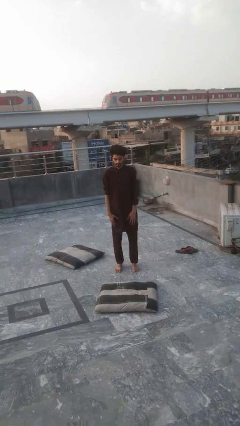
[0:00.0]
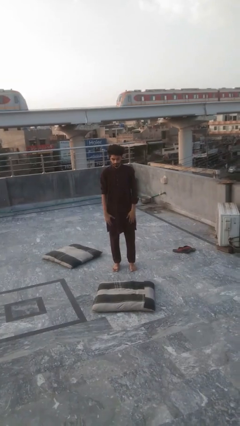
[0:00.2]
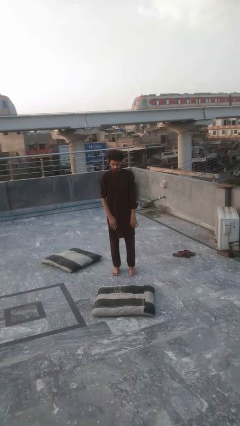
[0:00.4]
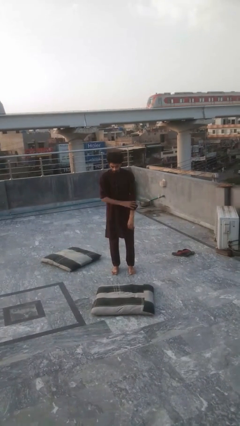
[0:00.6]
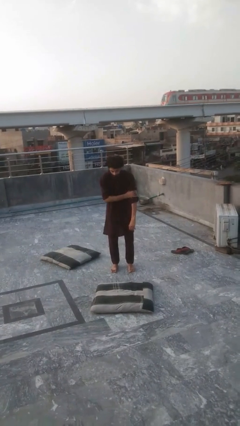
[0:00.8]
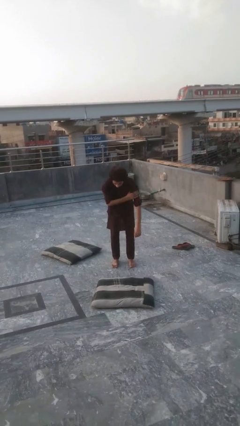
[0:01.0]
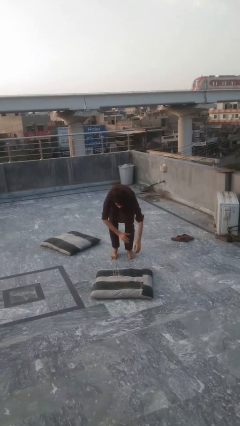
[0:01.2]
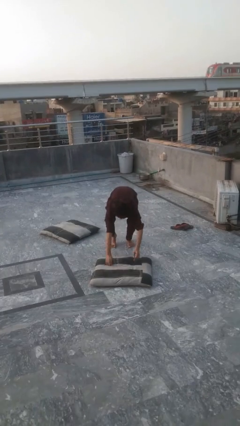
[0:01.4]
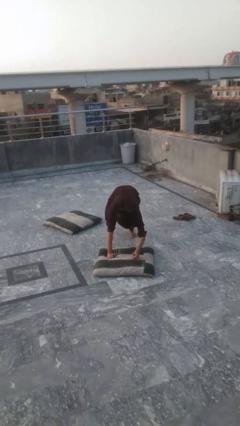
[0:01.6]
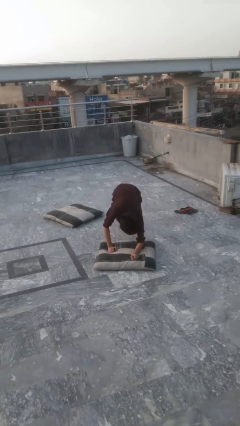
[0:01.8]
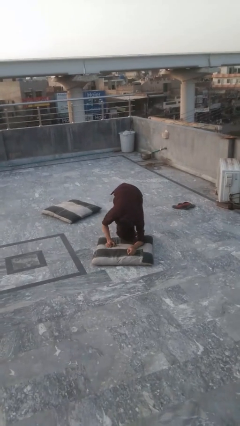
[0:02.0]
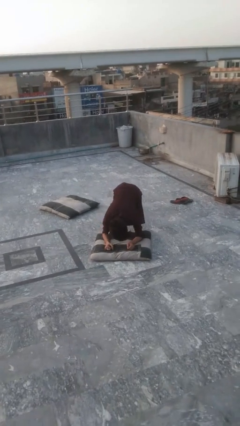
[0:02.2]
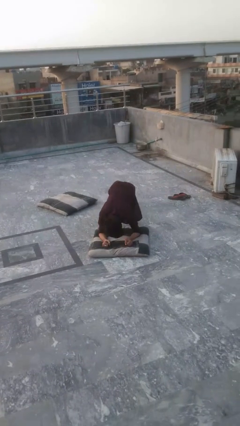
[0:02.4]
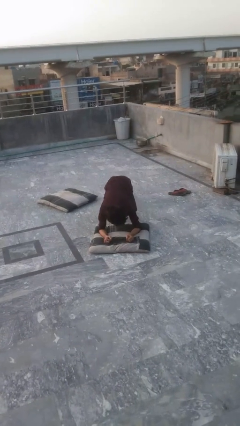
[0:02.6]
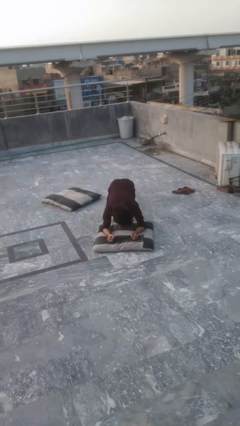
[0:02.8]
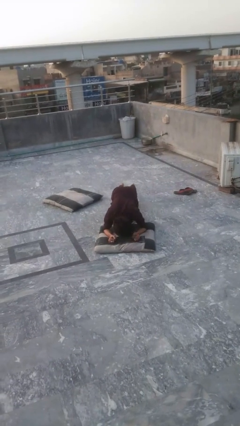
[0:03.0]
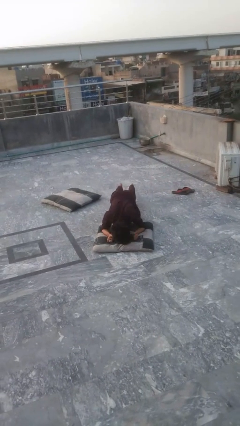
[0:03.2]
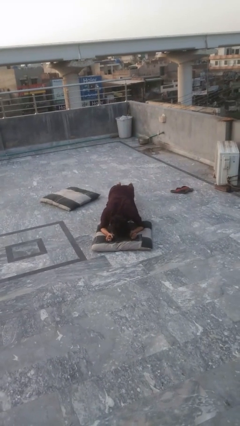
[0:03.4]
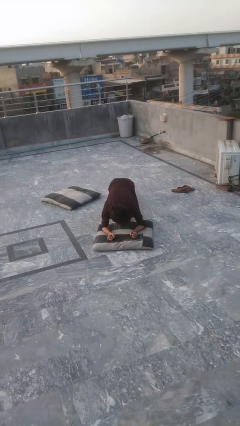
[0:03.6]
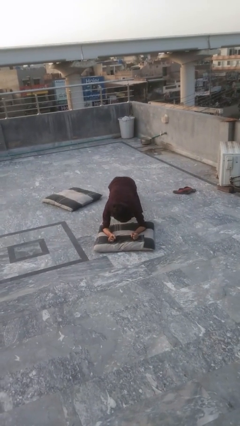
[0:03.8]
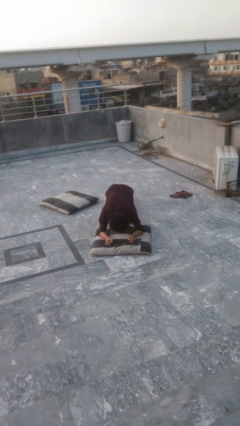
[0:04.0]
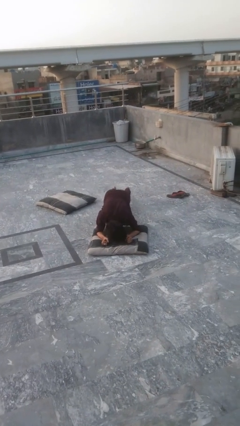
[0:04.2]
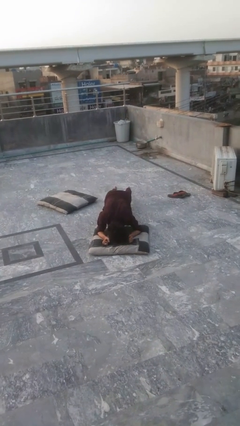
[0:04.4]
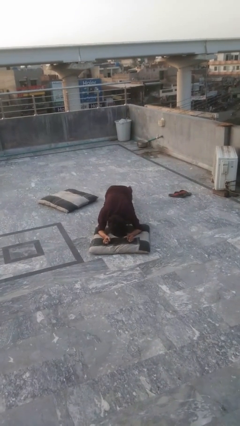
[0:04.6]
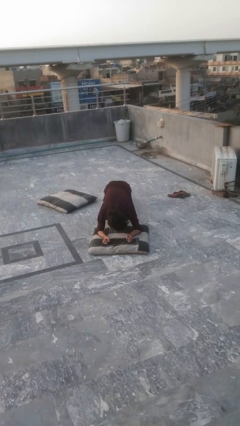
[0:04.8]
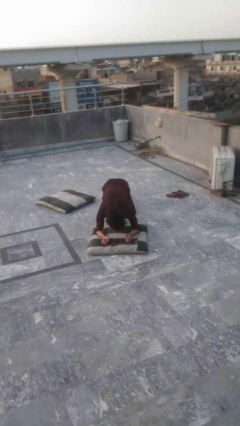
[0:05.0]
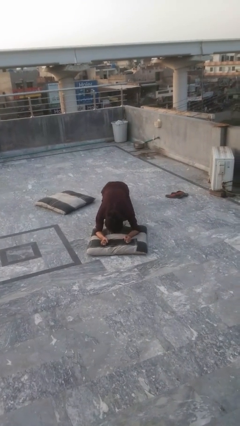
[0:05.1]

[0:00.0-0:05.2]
person exercises with plank

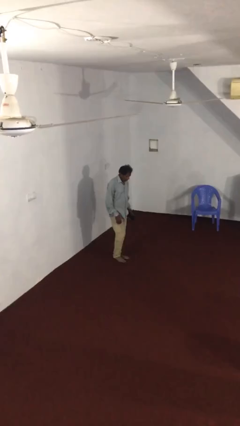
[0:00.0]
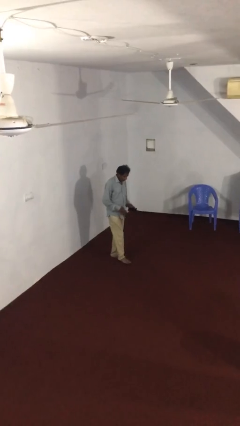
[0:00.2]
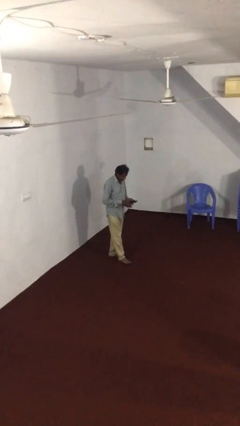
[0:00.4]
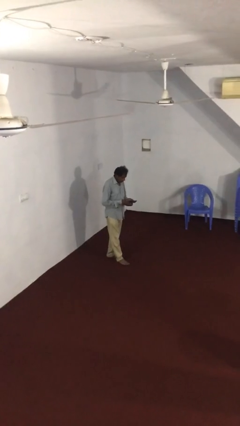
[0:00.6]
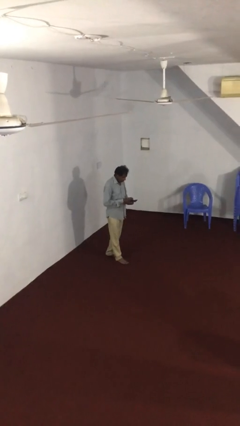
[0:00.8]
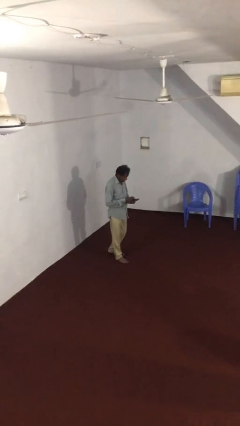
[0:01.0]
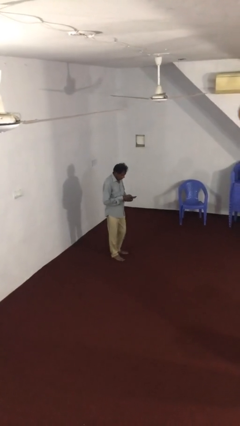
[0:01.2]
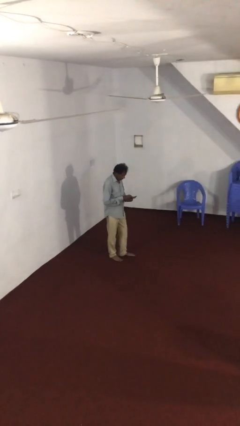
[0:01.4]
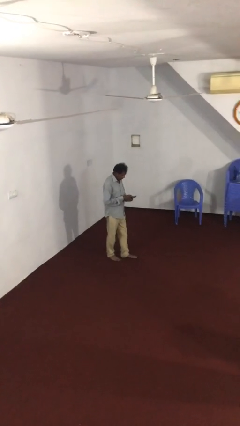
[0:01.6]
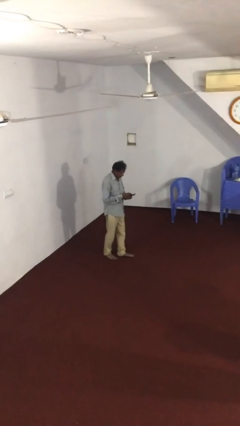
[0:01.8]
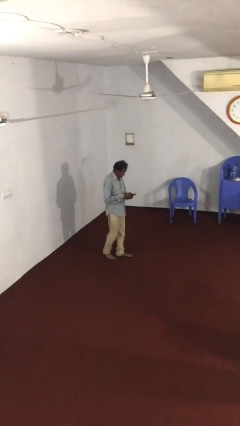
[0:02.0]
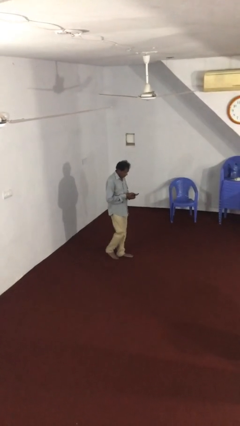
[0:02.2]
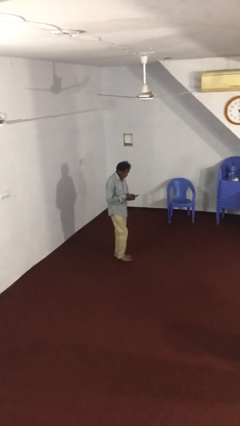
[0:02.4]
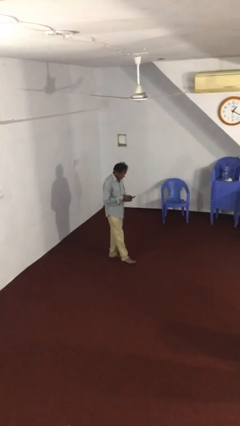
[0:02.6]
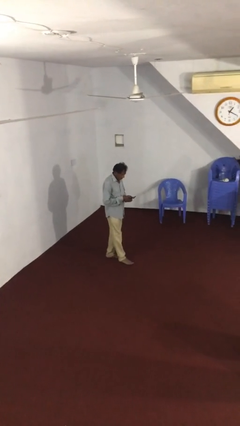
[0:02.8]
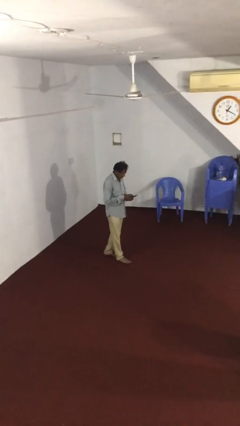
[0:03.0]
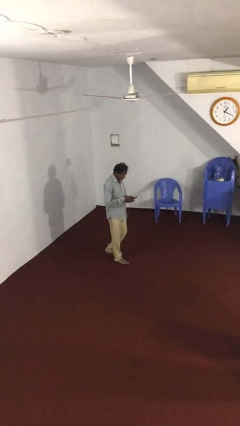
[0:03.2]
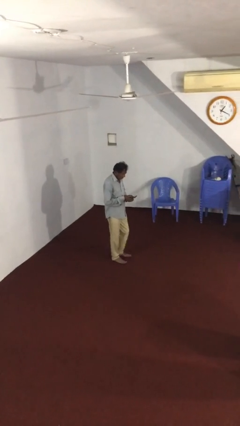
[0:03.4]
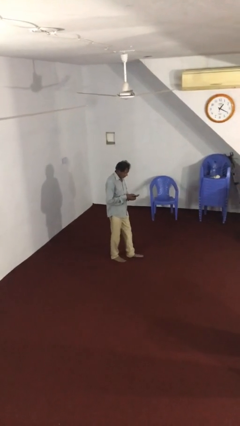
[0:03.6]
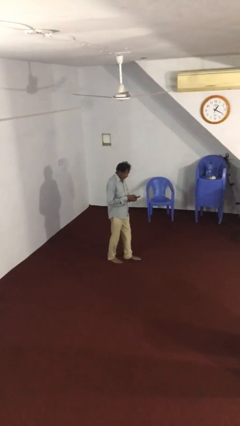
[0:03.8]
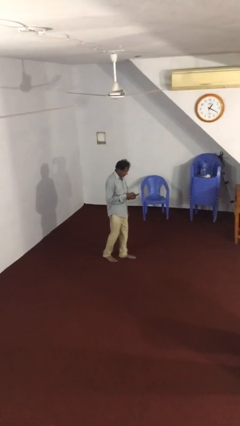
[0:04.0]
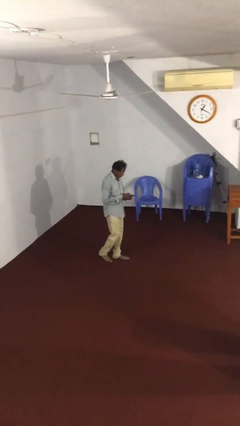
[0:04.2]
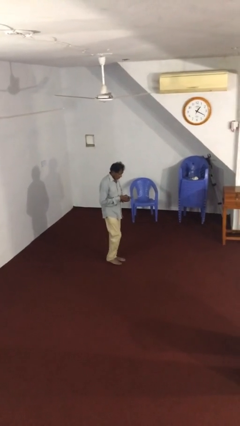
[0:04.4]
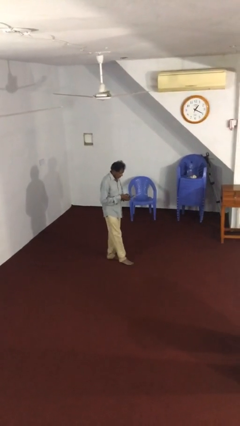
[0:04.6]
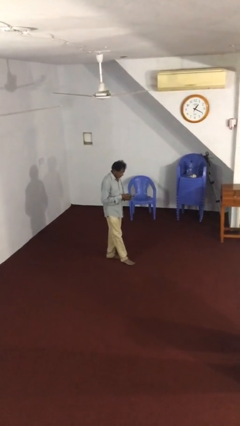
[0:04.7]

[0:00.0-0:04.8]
person texts on phone

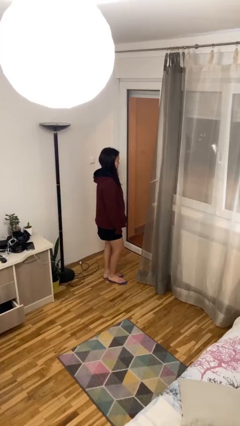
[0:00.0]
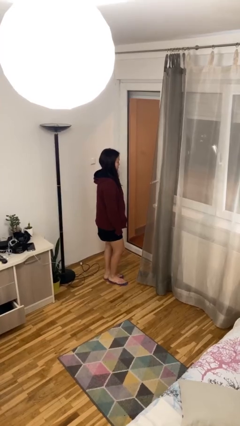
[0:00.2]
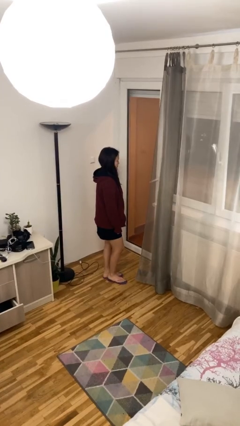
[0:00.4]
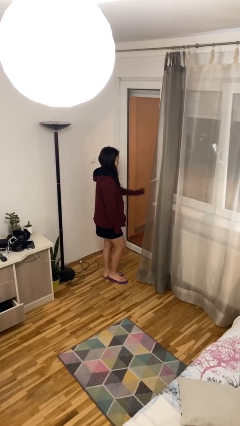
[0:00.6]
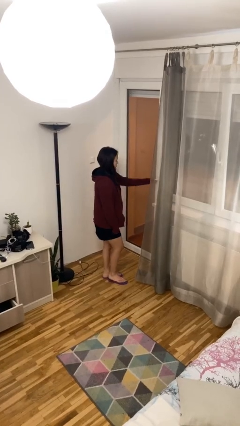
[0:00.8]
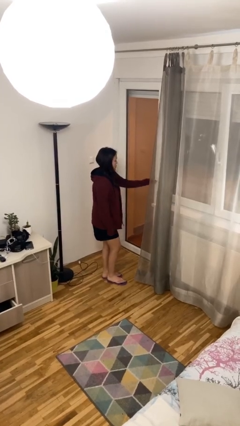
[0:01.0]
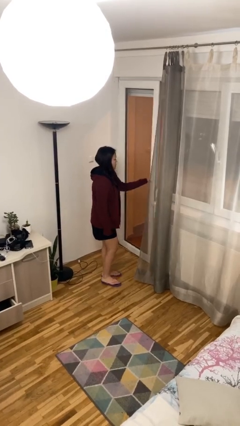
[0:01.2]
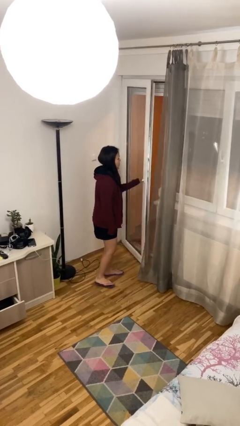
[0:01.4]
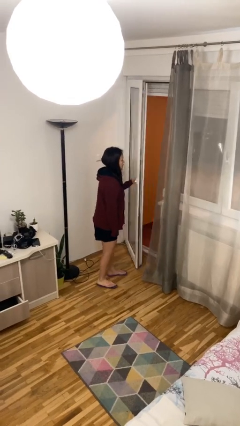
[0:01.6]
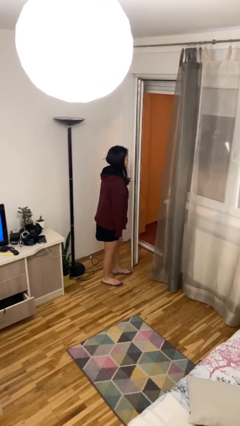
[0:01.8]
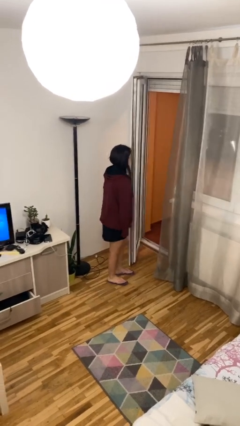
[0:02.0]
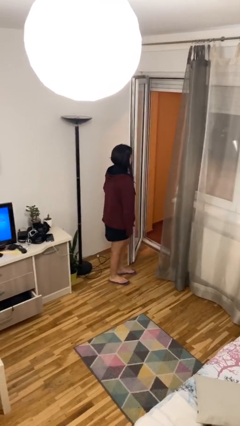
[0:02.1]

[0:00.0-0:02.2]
person opens facility door

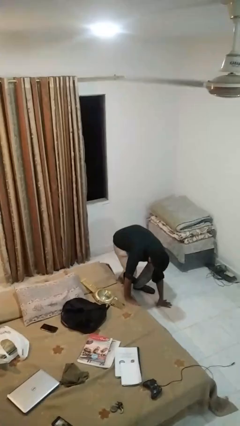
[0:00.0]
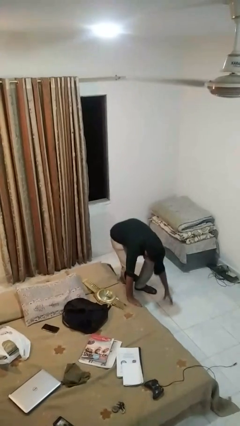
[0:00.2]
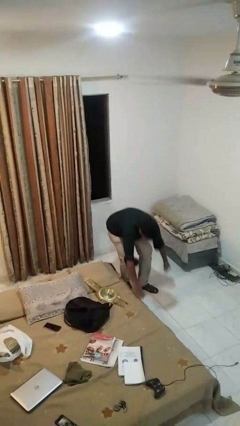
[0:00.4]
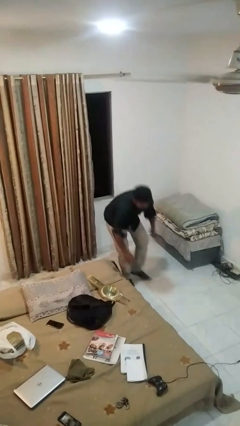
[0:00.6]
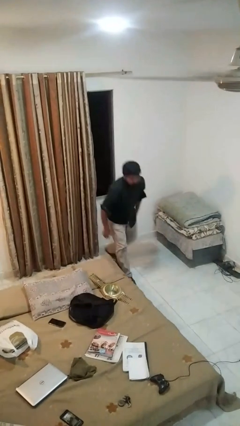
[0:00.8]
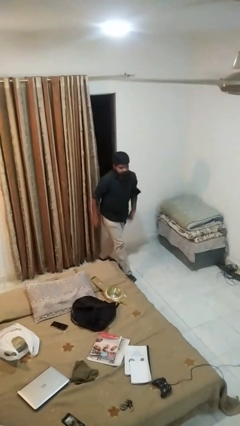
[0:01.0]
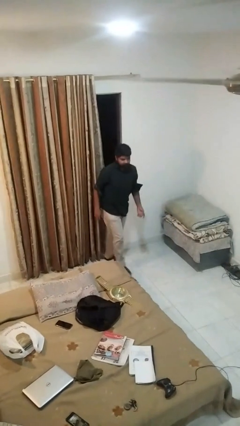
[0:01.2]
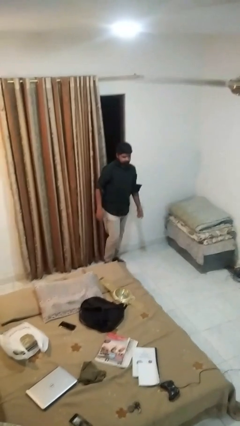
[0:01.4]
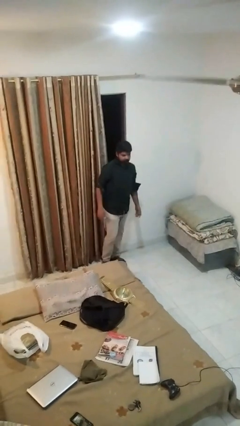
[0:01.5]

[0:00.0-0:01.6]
person stands up from floor

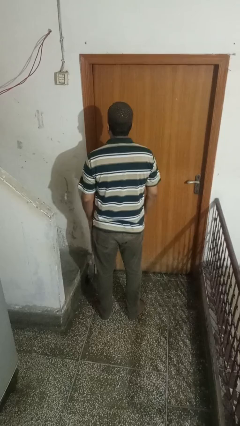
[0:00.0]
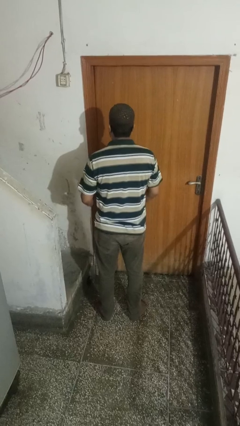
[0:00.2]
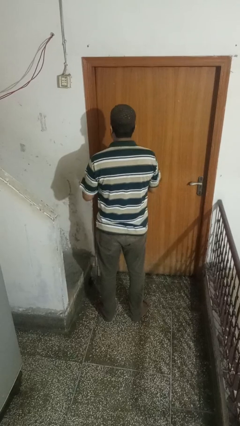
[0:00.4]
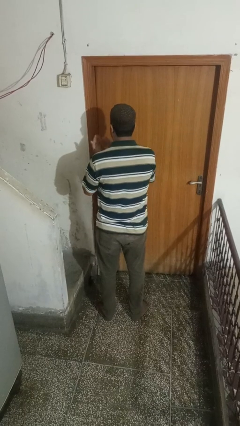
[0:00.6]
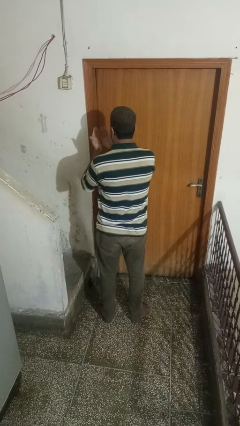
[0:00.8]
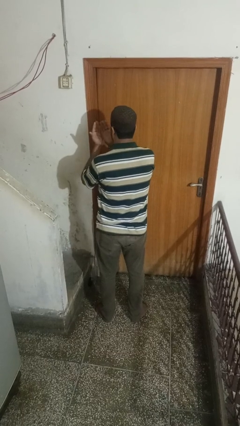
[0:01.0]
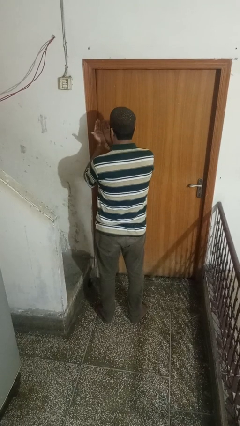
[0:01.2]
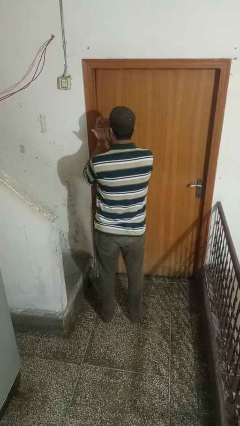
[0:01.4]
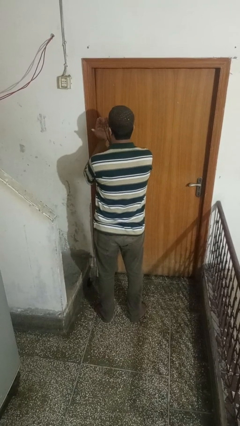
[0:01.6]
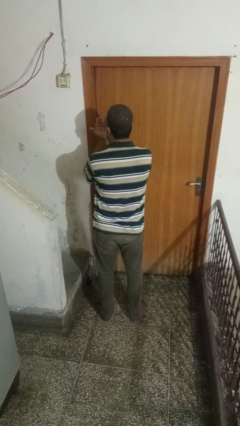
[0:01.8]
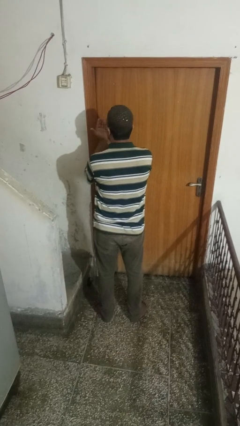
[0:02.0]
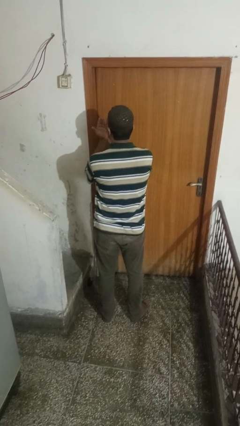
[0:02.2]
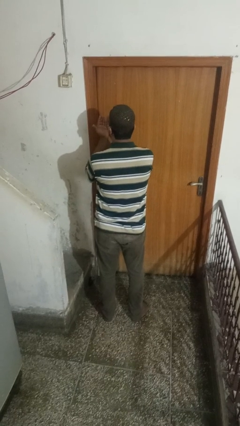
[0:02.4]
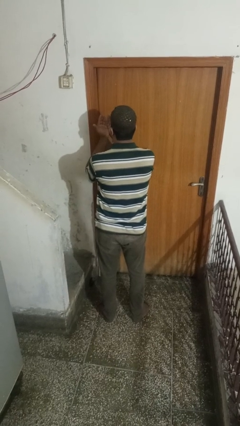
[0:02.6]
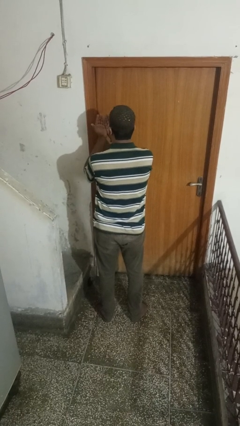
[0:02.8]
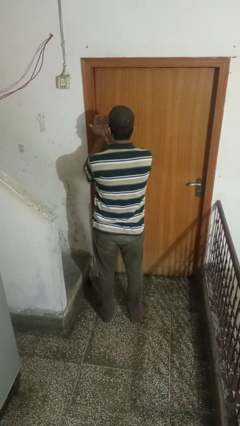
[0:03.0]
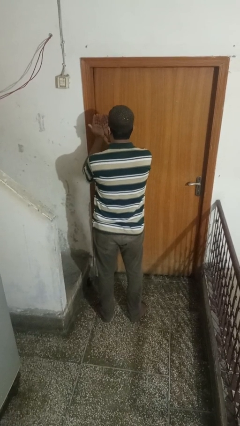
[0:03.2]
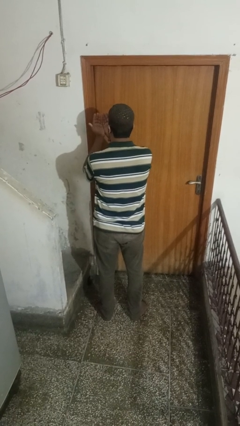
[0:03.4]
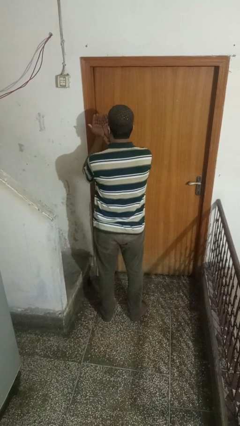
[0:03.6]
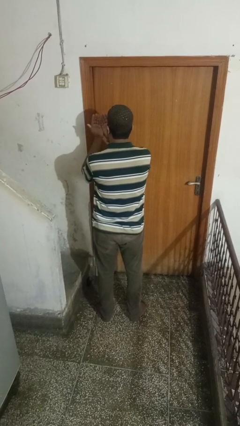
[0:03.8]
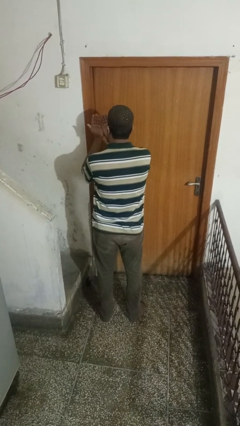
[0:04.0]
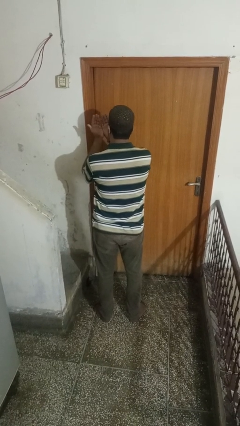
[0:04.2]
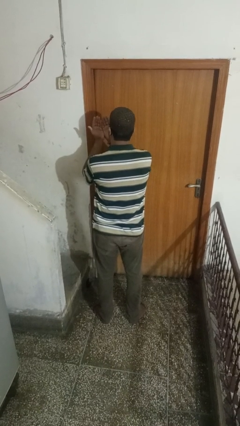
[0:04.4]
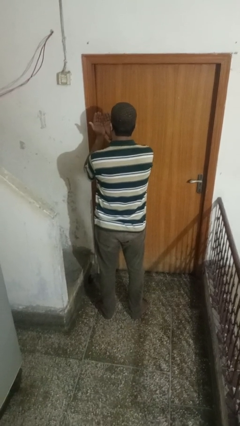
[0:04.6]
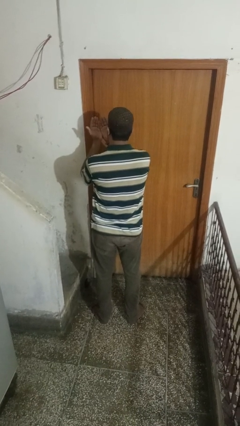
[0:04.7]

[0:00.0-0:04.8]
person prays
